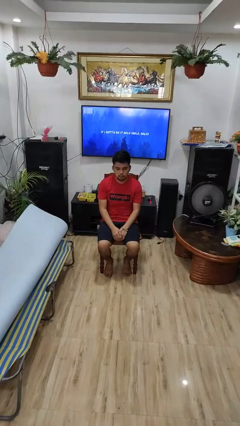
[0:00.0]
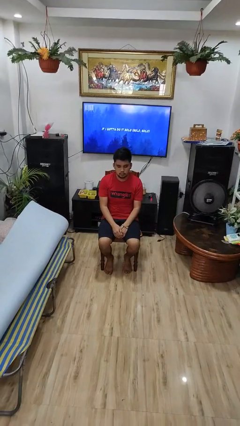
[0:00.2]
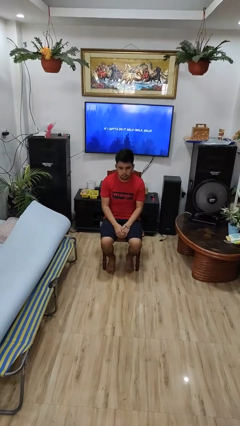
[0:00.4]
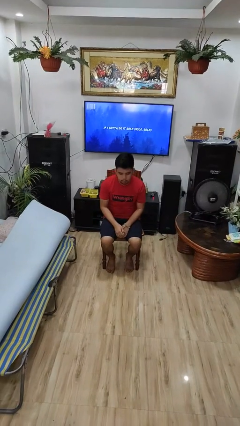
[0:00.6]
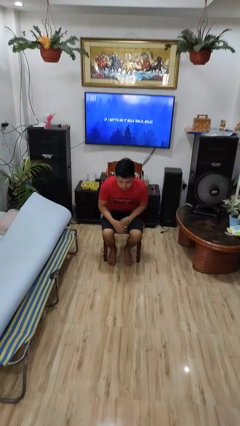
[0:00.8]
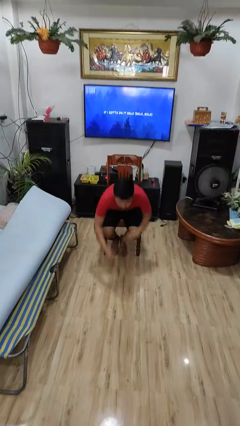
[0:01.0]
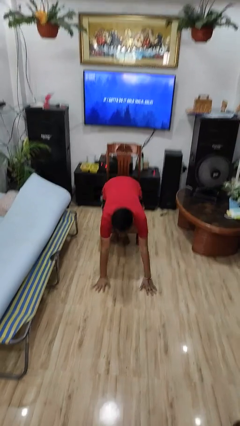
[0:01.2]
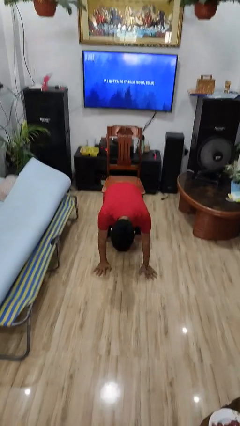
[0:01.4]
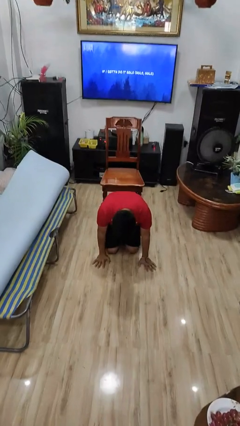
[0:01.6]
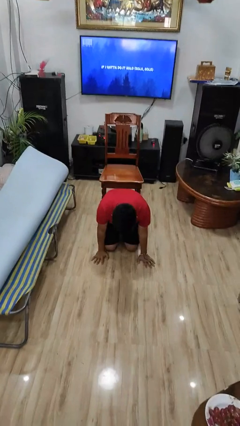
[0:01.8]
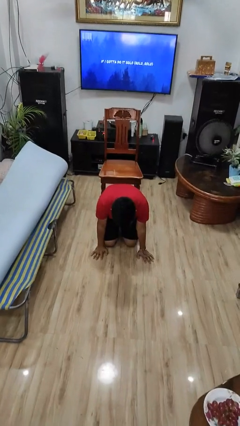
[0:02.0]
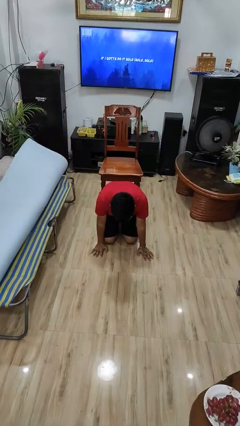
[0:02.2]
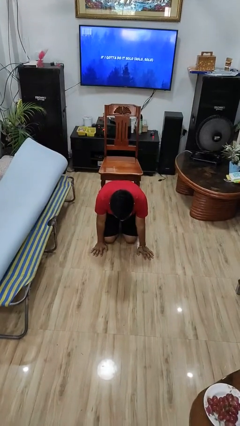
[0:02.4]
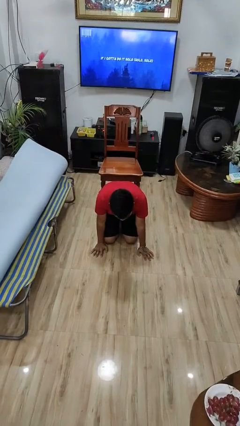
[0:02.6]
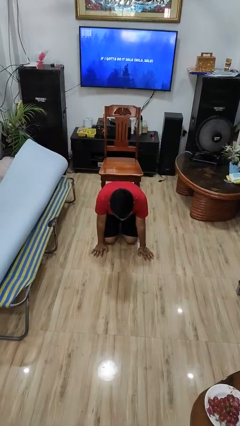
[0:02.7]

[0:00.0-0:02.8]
person falls from chair

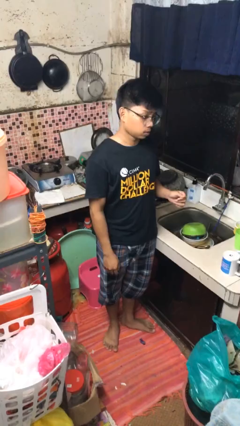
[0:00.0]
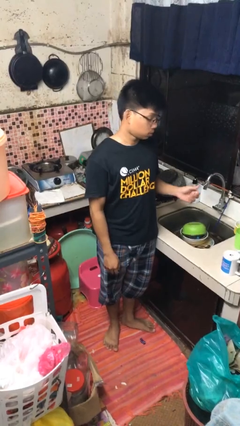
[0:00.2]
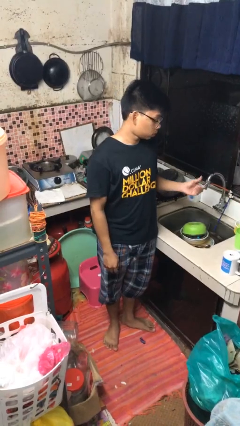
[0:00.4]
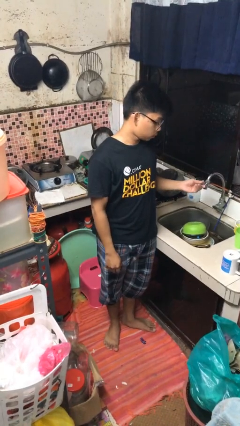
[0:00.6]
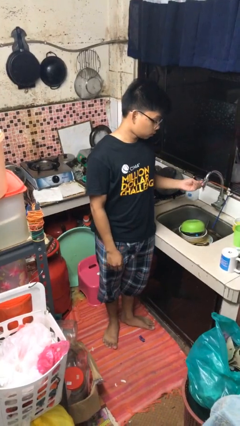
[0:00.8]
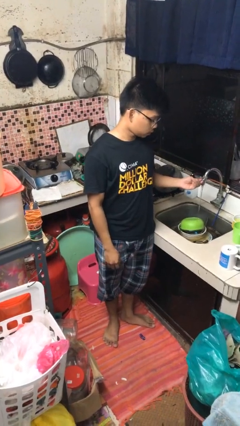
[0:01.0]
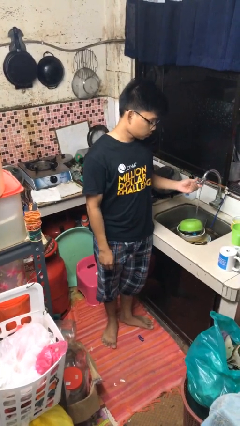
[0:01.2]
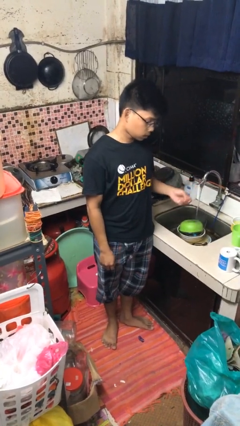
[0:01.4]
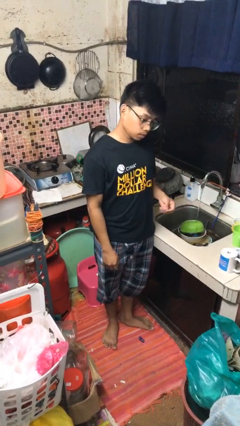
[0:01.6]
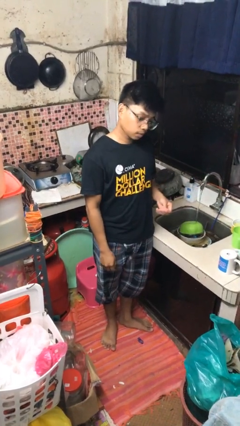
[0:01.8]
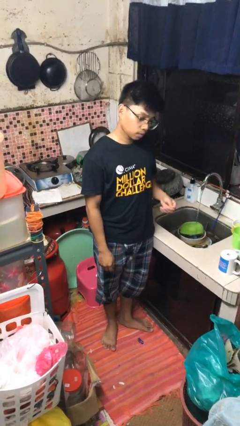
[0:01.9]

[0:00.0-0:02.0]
person turns on faucet

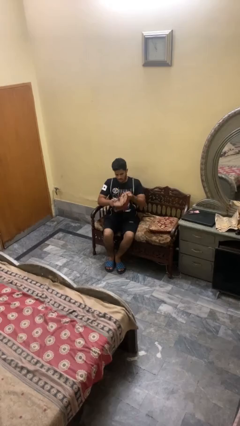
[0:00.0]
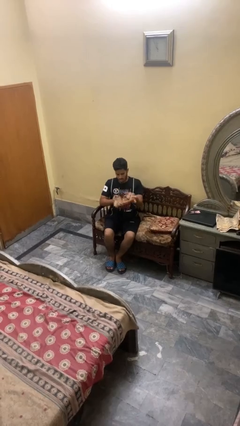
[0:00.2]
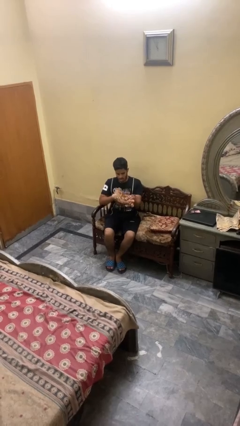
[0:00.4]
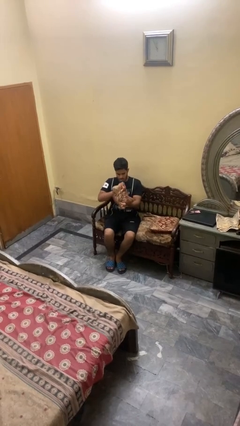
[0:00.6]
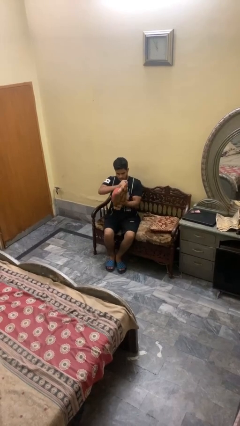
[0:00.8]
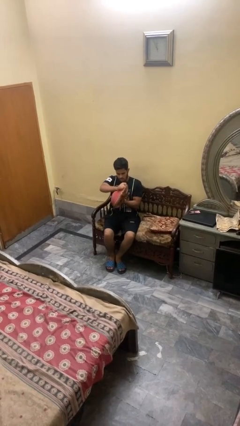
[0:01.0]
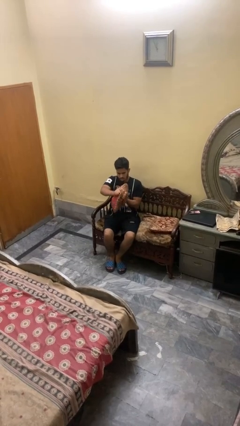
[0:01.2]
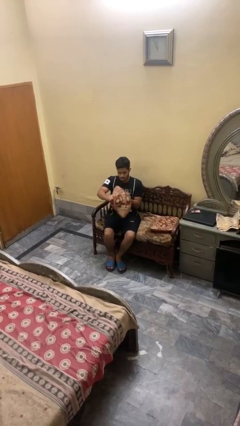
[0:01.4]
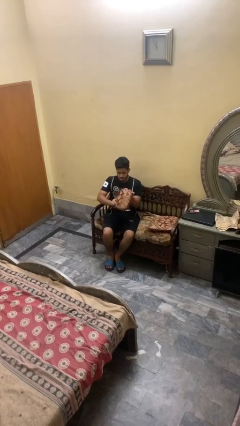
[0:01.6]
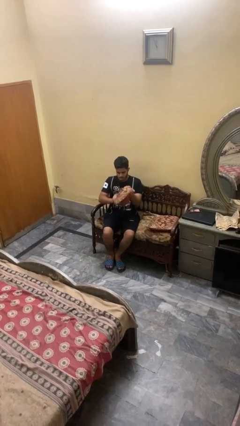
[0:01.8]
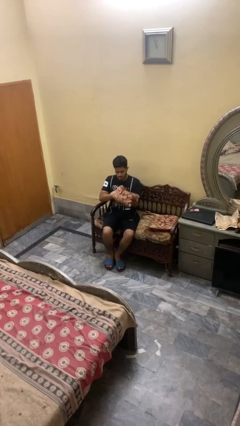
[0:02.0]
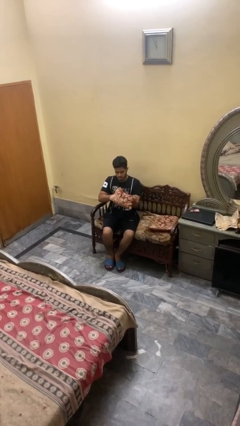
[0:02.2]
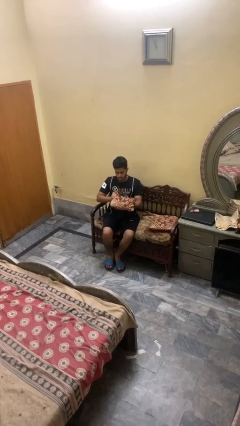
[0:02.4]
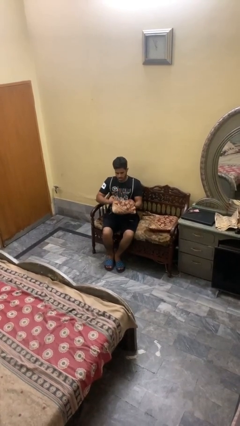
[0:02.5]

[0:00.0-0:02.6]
person squeezes object

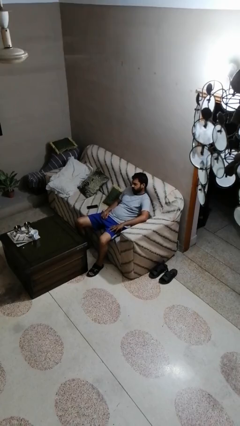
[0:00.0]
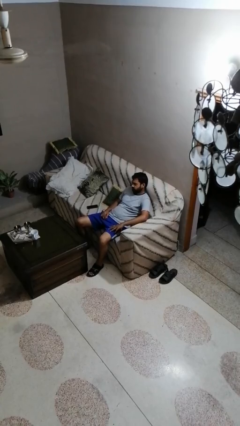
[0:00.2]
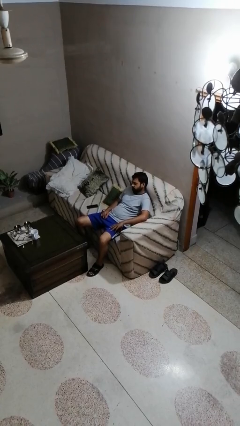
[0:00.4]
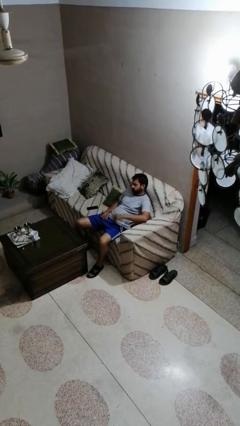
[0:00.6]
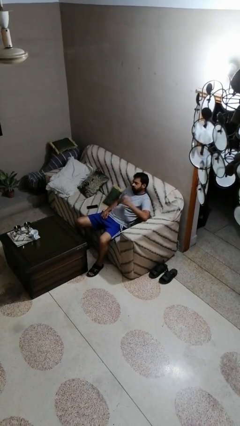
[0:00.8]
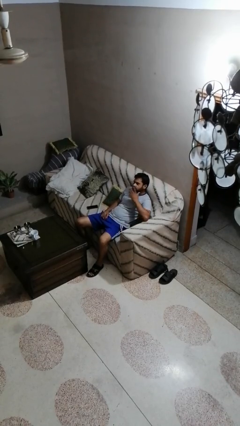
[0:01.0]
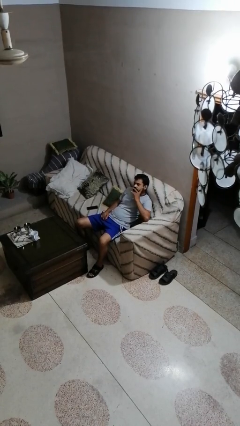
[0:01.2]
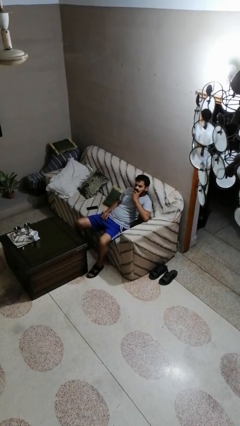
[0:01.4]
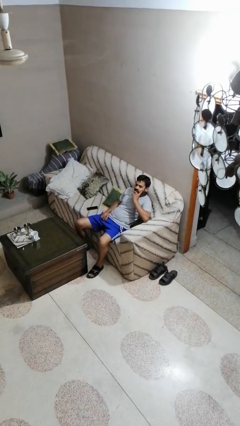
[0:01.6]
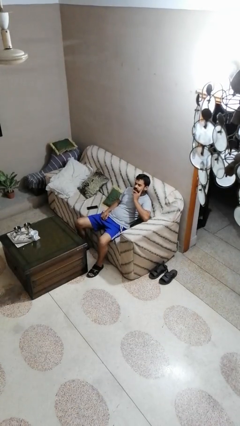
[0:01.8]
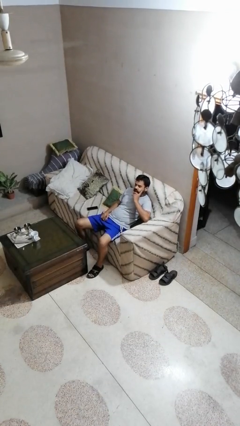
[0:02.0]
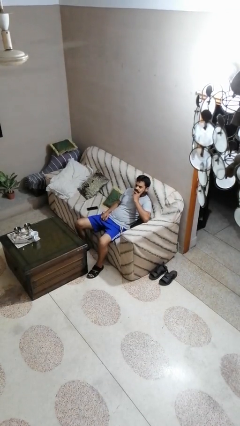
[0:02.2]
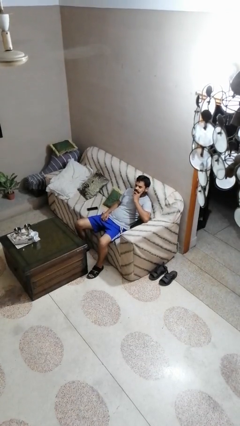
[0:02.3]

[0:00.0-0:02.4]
person strokes chin

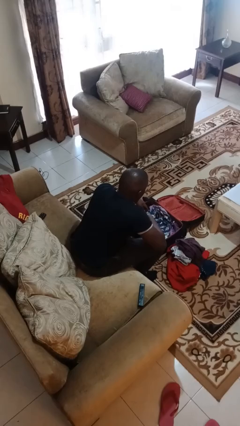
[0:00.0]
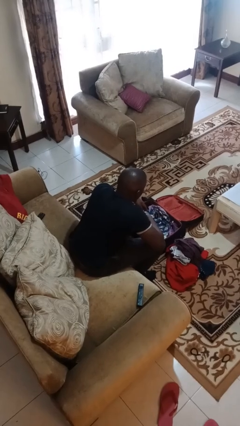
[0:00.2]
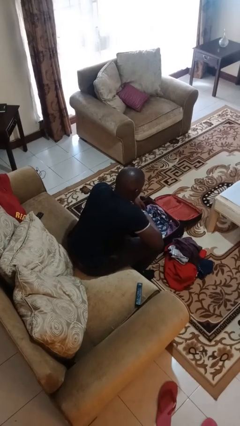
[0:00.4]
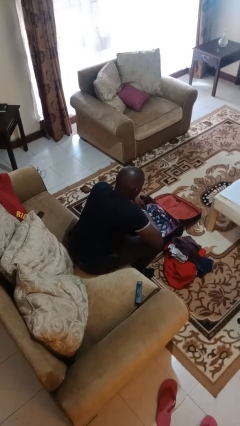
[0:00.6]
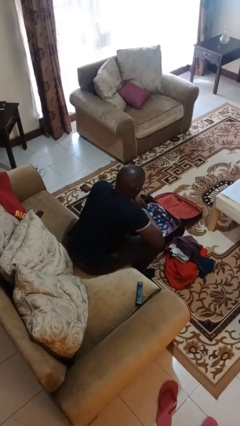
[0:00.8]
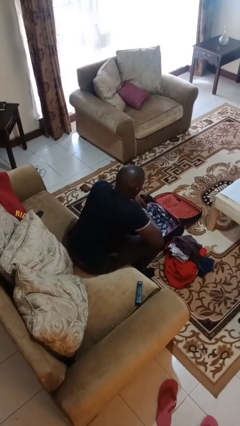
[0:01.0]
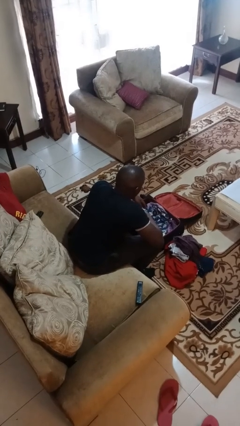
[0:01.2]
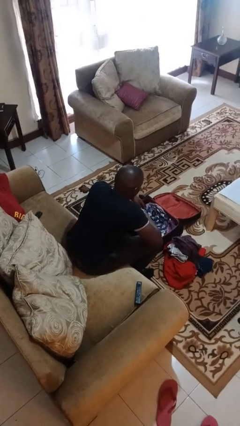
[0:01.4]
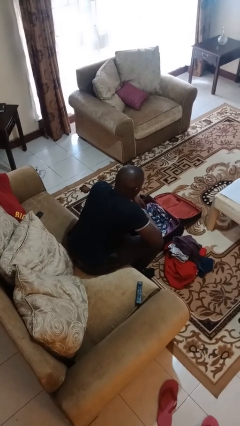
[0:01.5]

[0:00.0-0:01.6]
person unloads clothes from suitcase

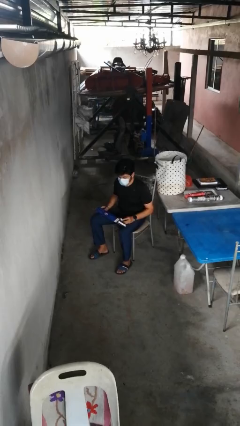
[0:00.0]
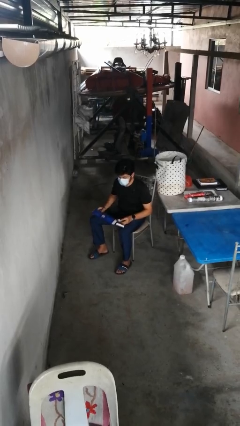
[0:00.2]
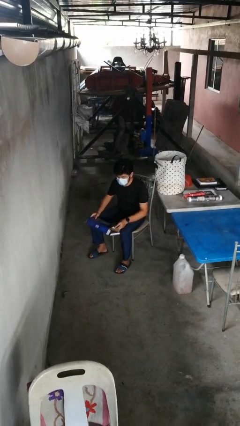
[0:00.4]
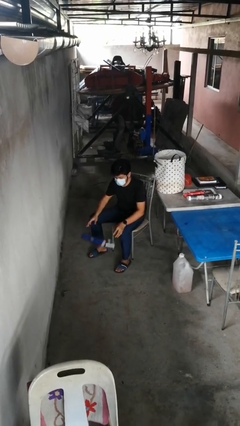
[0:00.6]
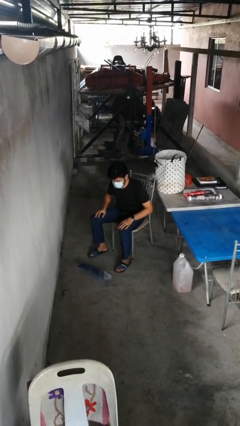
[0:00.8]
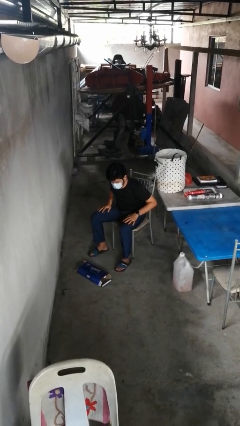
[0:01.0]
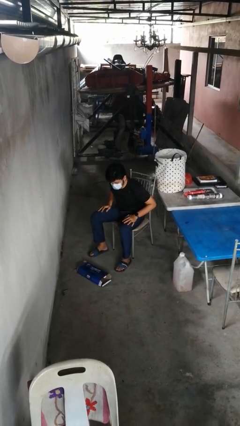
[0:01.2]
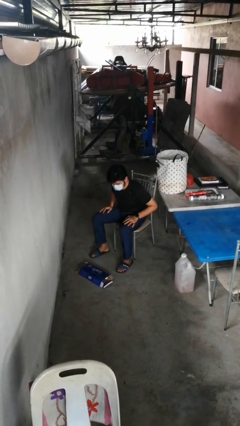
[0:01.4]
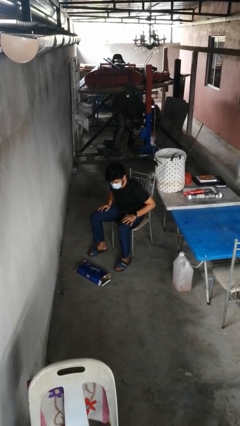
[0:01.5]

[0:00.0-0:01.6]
person drops object

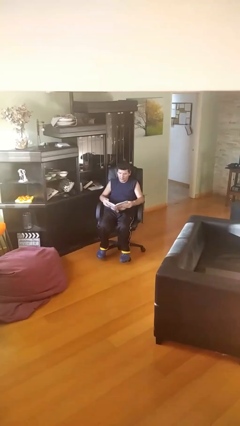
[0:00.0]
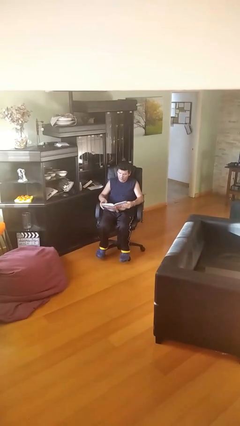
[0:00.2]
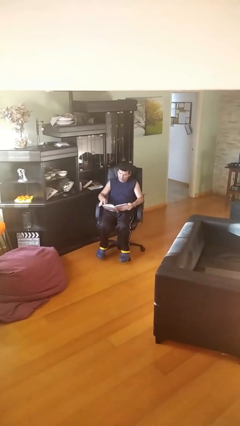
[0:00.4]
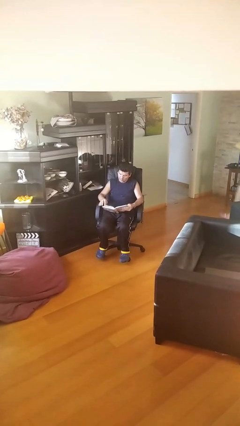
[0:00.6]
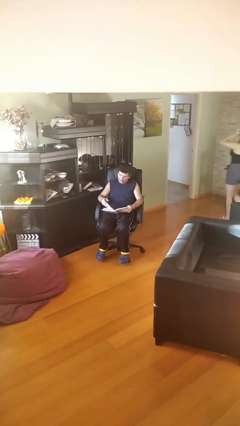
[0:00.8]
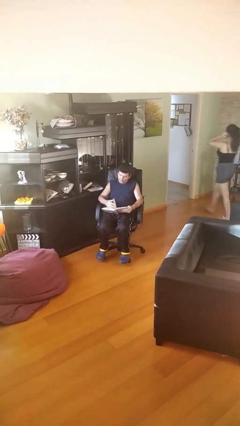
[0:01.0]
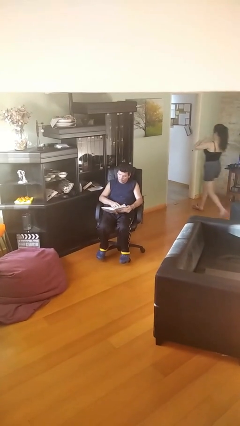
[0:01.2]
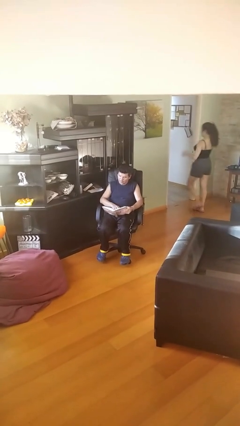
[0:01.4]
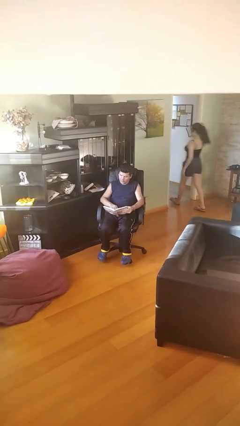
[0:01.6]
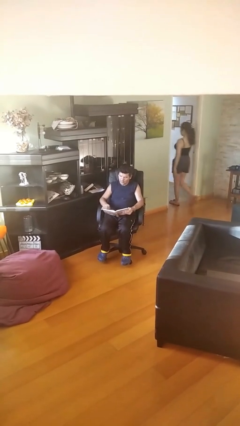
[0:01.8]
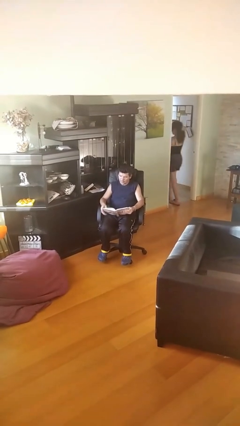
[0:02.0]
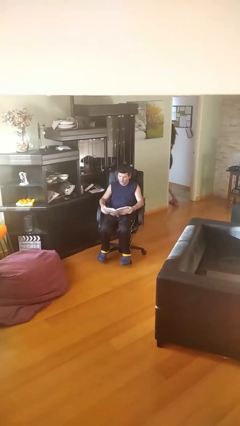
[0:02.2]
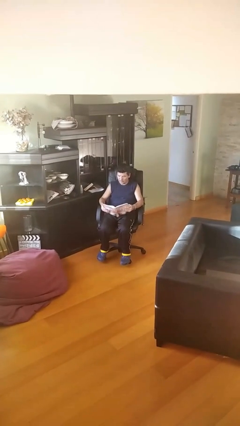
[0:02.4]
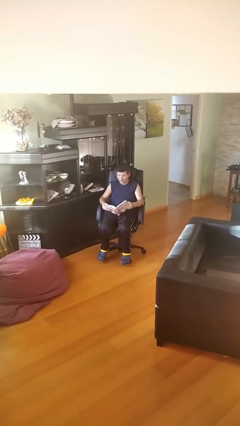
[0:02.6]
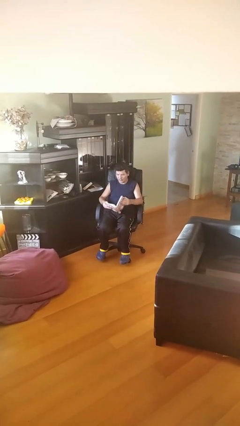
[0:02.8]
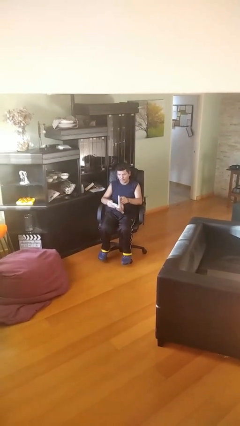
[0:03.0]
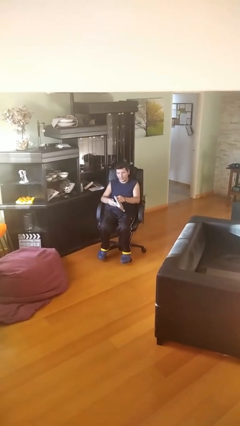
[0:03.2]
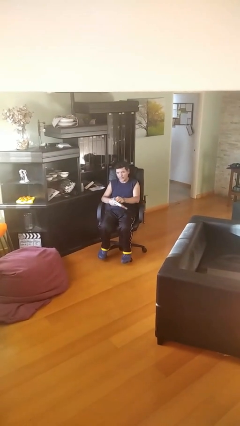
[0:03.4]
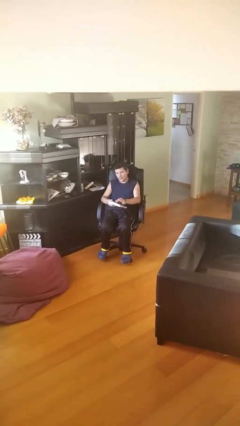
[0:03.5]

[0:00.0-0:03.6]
person reads document

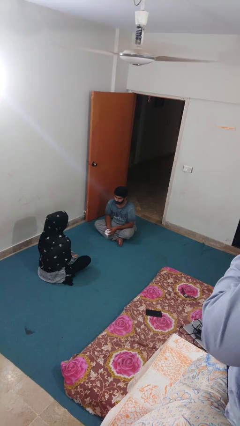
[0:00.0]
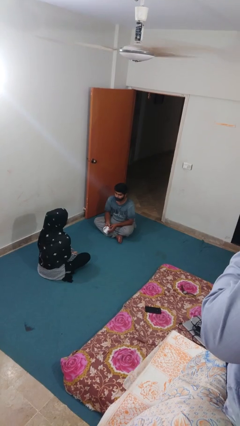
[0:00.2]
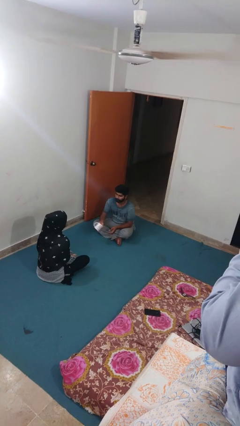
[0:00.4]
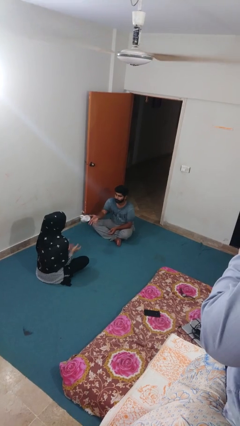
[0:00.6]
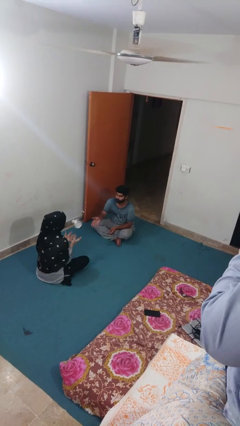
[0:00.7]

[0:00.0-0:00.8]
person throws object to person
